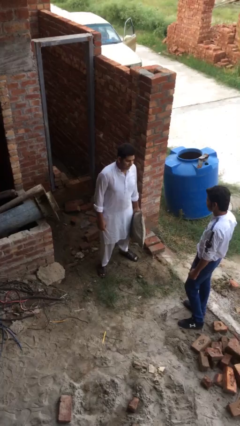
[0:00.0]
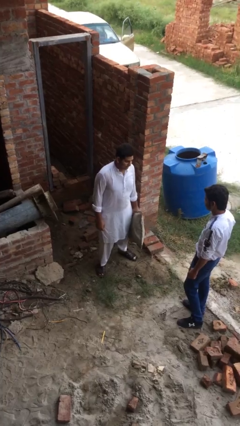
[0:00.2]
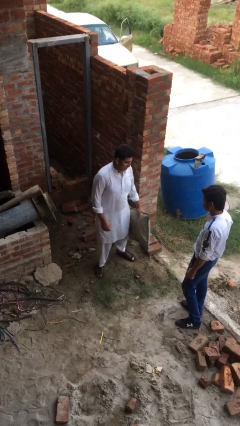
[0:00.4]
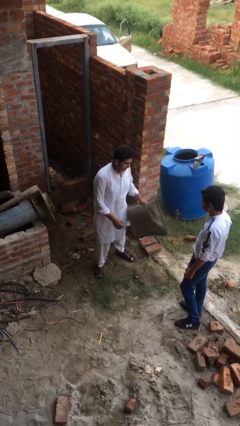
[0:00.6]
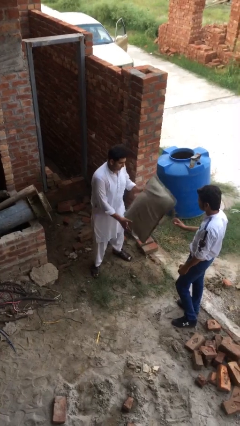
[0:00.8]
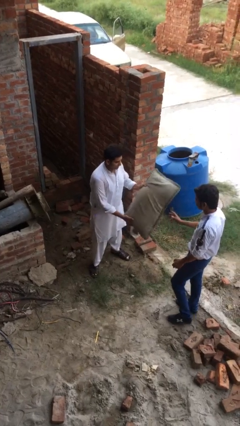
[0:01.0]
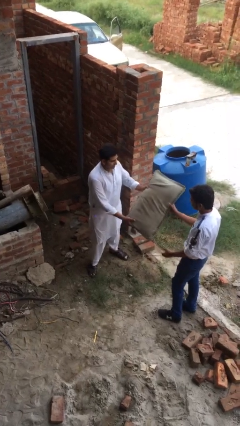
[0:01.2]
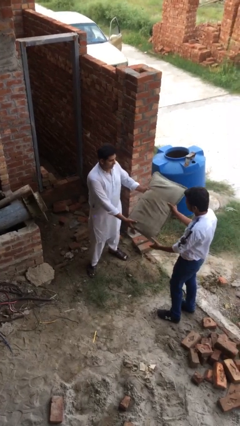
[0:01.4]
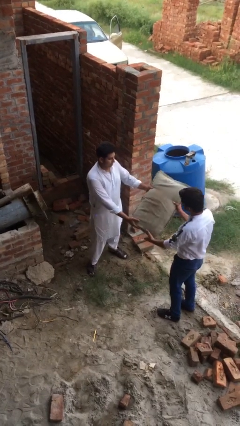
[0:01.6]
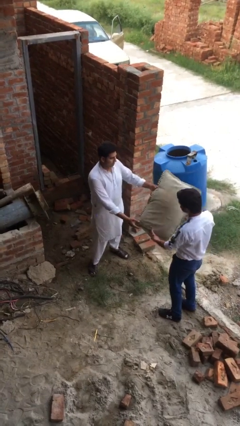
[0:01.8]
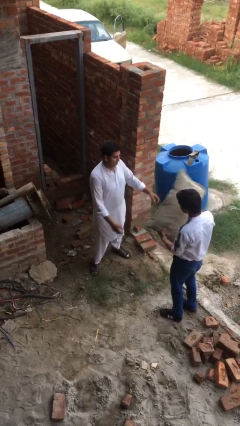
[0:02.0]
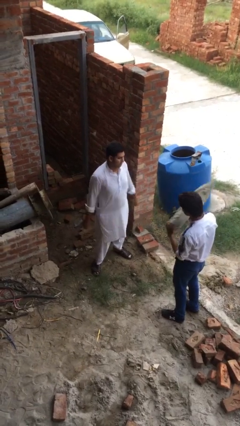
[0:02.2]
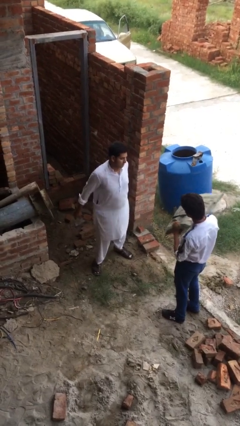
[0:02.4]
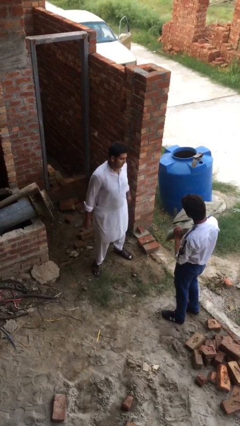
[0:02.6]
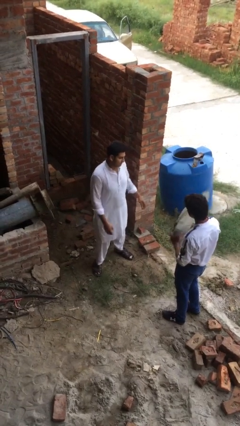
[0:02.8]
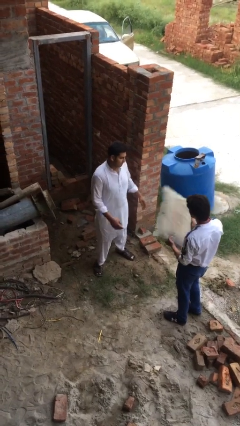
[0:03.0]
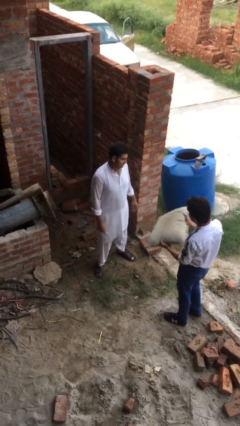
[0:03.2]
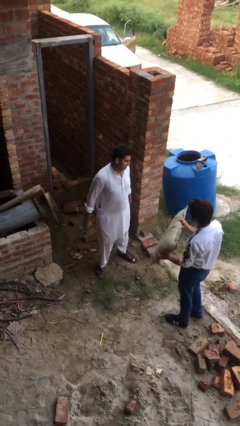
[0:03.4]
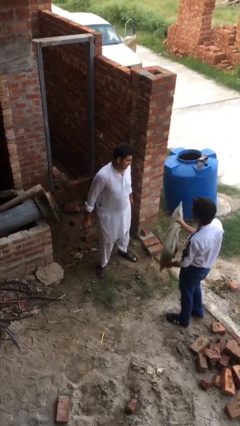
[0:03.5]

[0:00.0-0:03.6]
person transfers object to person

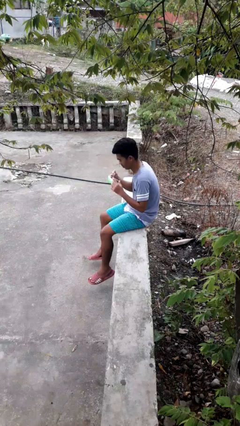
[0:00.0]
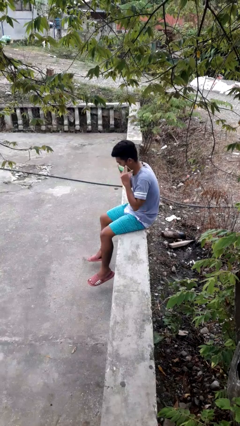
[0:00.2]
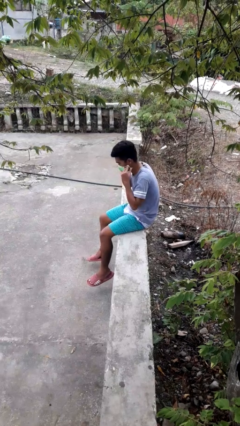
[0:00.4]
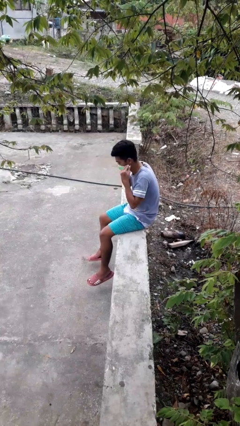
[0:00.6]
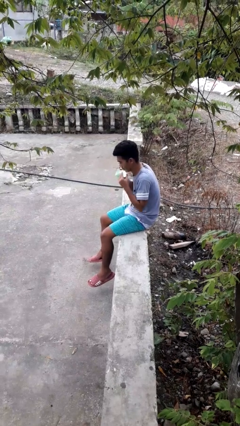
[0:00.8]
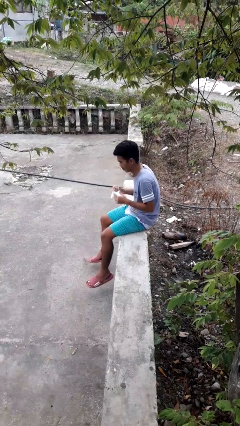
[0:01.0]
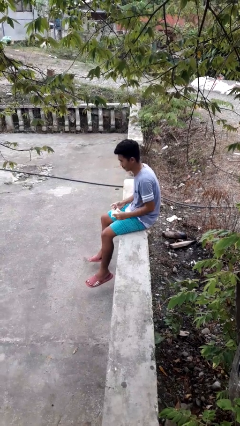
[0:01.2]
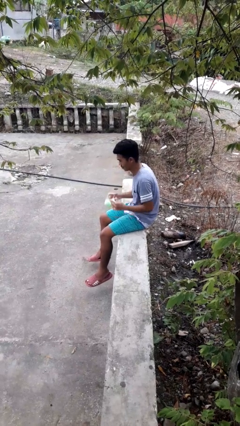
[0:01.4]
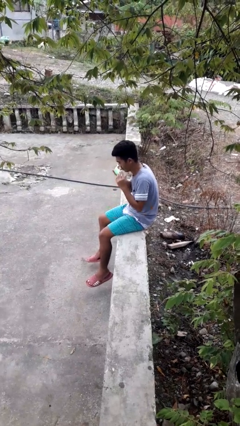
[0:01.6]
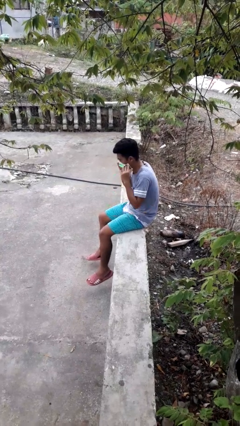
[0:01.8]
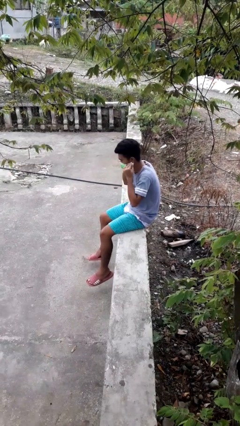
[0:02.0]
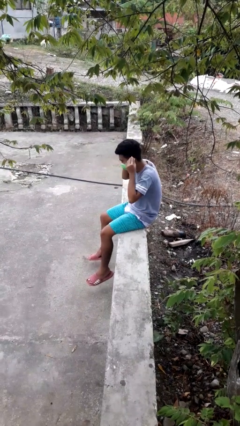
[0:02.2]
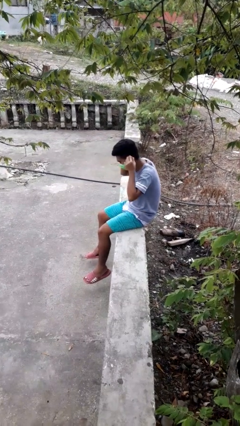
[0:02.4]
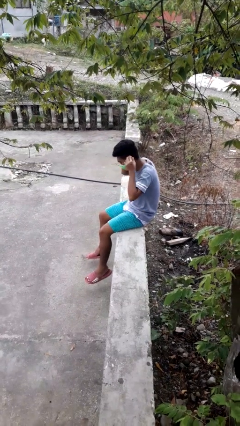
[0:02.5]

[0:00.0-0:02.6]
person puts on facemask

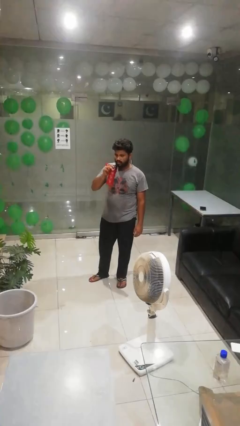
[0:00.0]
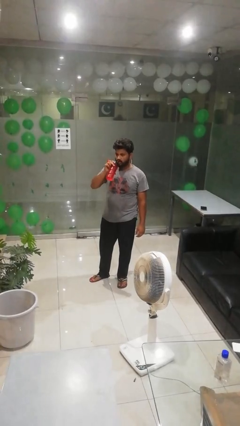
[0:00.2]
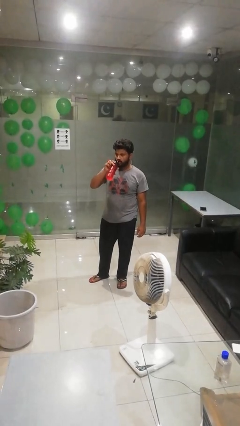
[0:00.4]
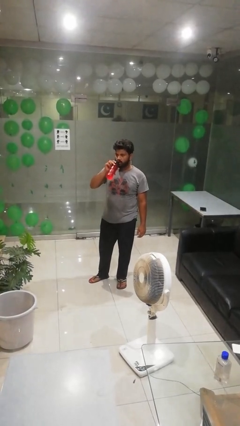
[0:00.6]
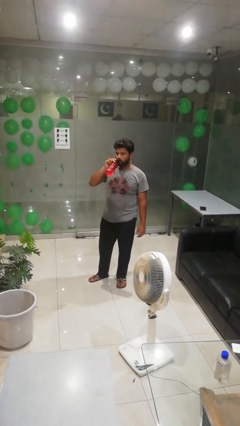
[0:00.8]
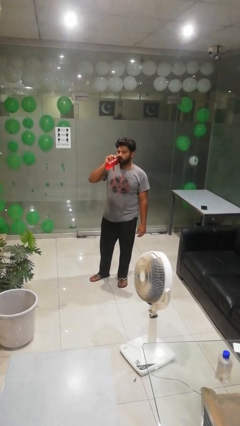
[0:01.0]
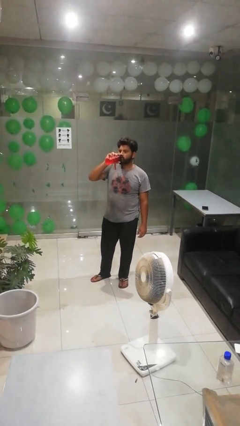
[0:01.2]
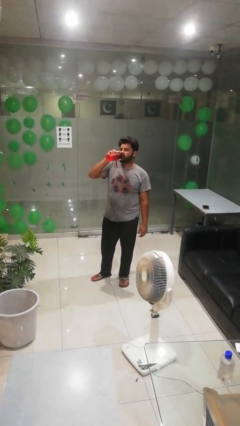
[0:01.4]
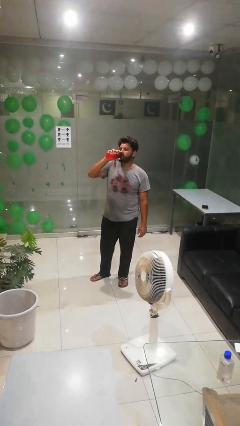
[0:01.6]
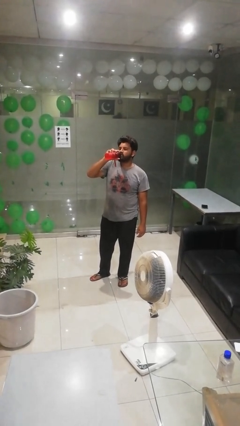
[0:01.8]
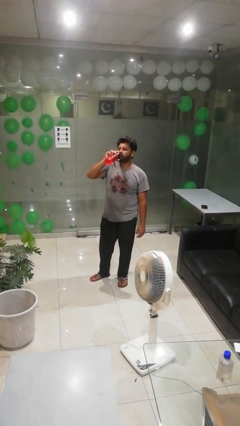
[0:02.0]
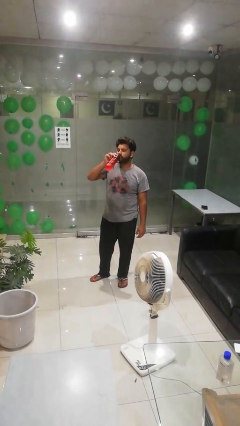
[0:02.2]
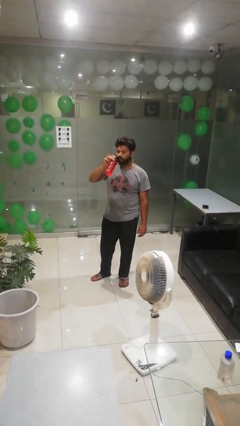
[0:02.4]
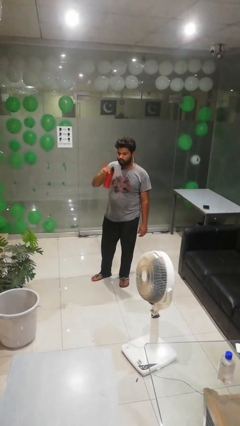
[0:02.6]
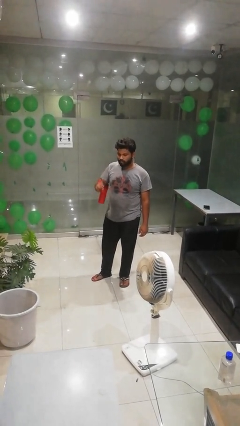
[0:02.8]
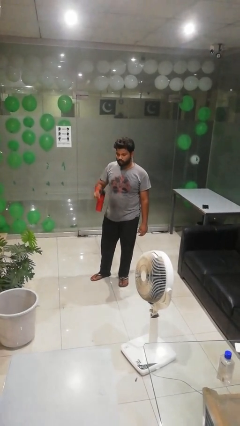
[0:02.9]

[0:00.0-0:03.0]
person drinks from bottle

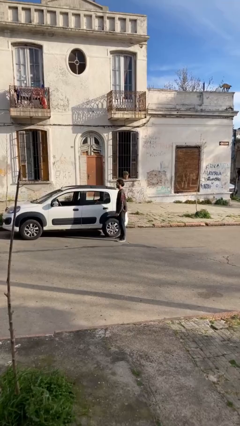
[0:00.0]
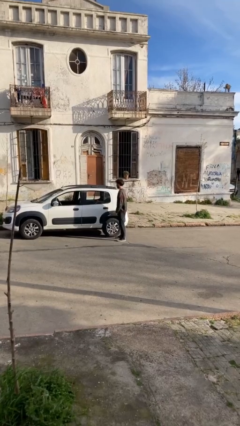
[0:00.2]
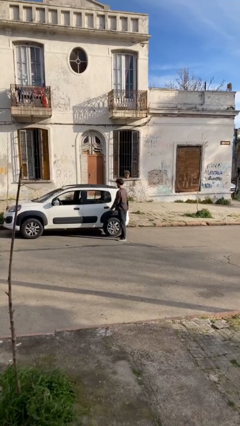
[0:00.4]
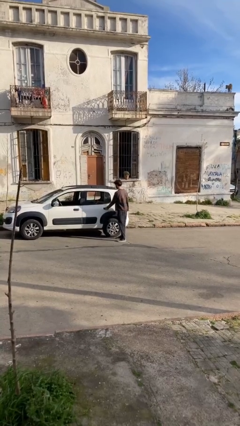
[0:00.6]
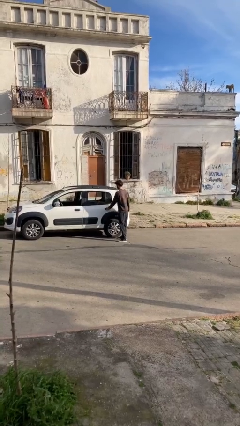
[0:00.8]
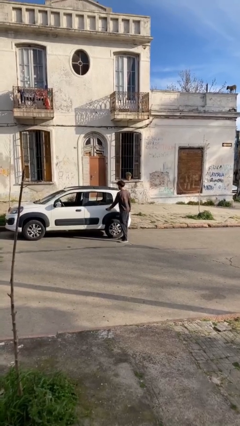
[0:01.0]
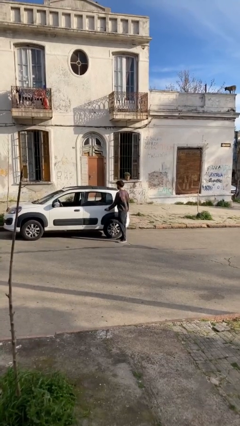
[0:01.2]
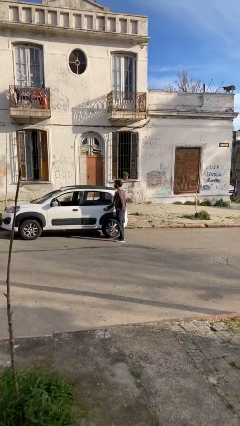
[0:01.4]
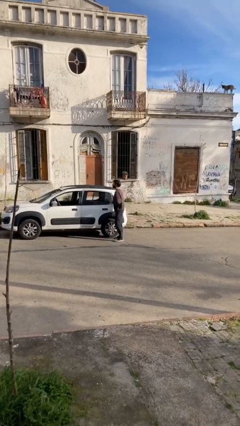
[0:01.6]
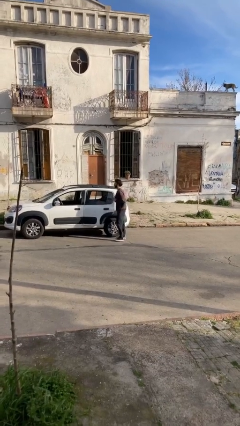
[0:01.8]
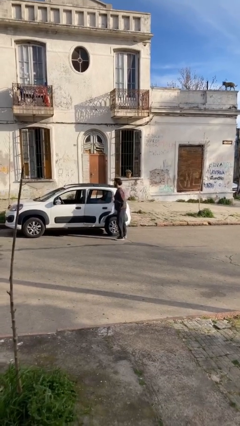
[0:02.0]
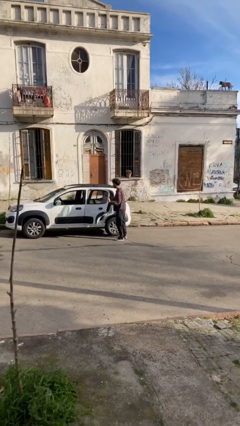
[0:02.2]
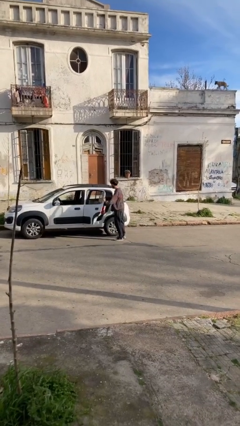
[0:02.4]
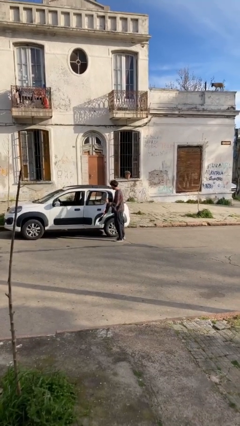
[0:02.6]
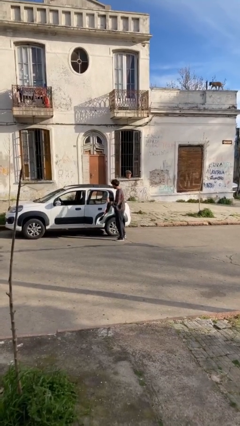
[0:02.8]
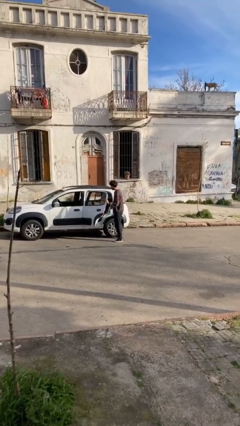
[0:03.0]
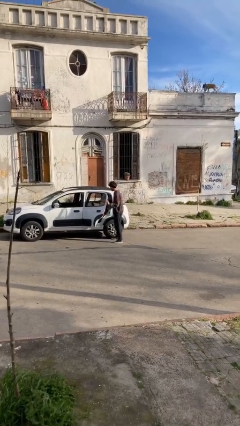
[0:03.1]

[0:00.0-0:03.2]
person opens car door

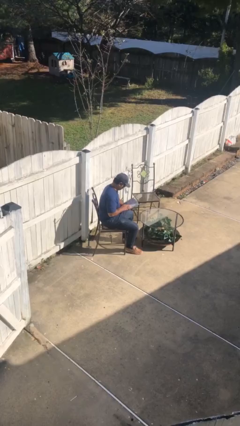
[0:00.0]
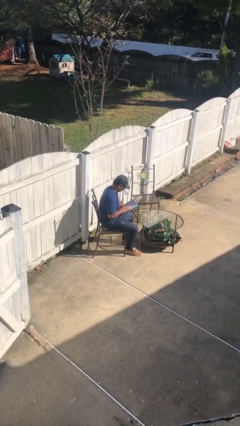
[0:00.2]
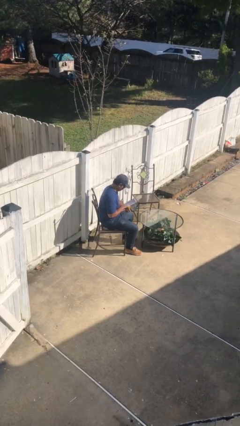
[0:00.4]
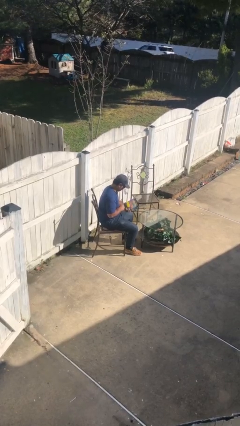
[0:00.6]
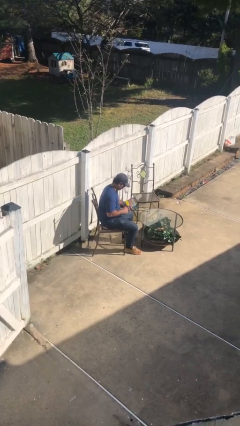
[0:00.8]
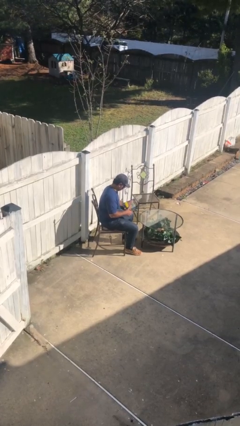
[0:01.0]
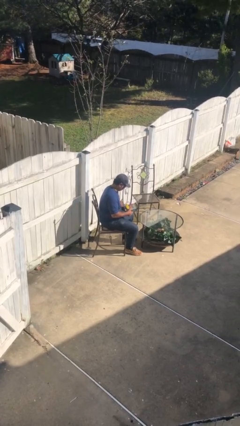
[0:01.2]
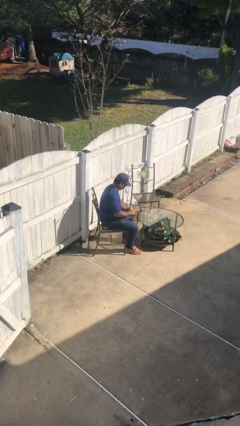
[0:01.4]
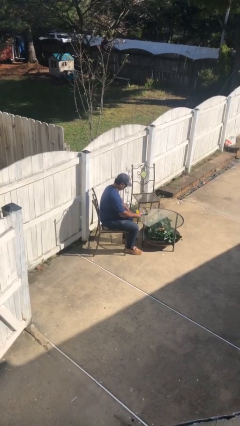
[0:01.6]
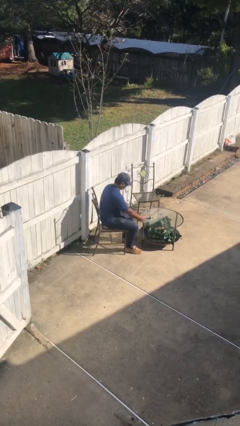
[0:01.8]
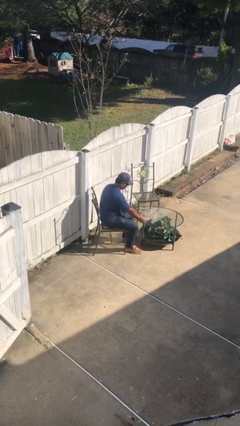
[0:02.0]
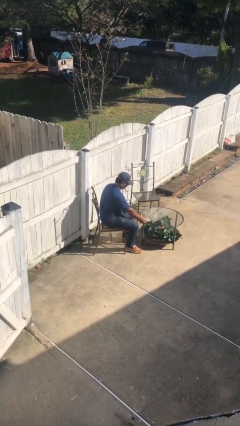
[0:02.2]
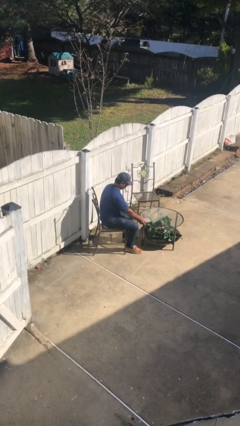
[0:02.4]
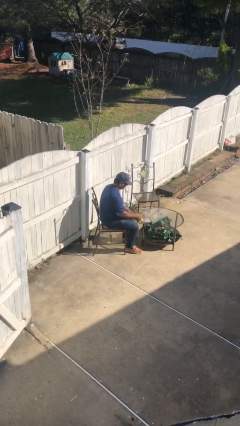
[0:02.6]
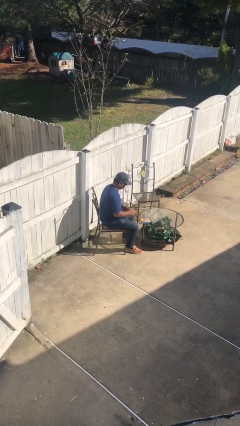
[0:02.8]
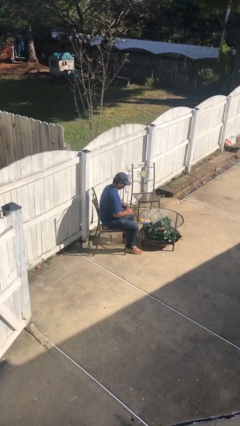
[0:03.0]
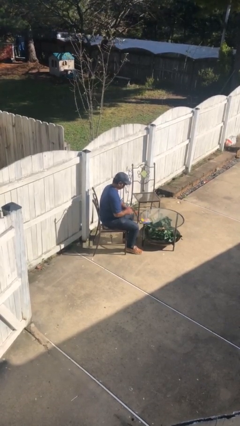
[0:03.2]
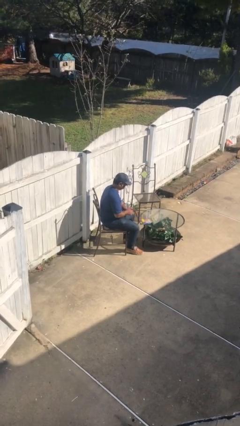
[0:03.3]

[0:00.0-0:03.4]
person puts down object on table

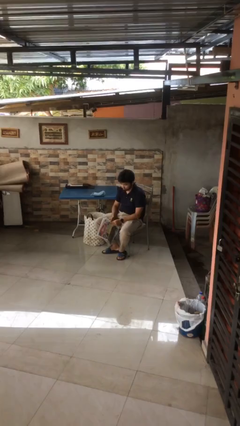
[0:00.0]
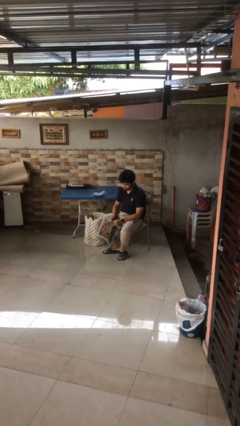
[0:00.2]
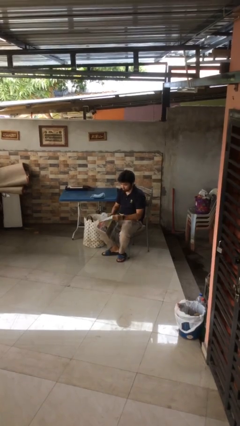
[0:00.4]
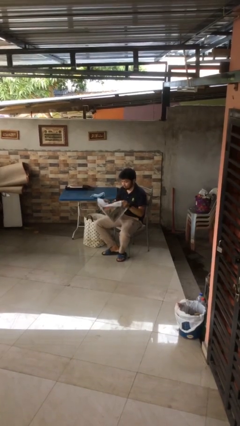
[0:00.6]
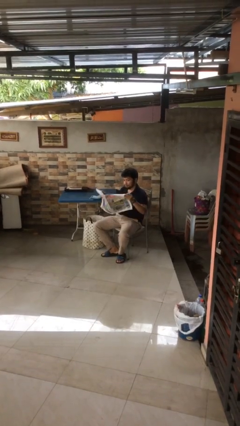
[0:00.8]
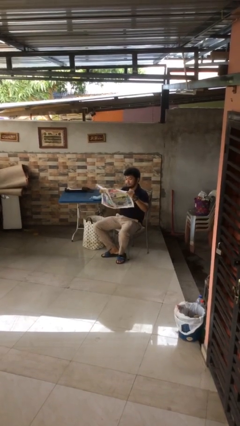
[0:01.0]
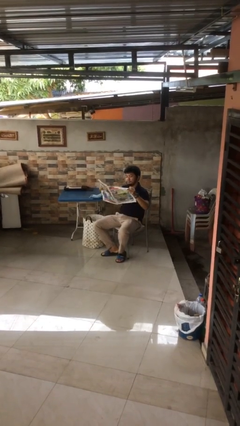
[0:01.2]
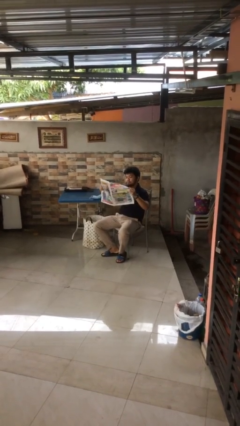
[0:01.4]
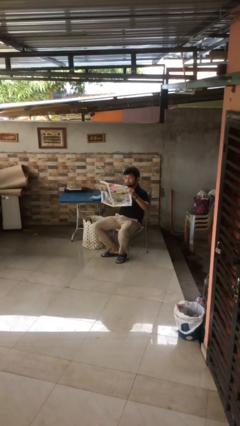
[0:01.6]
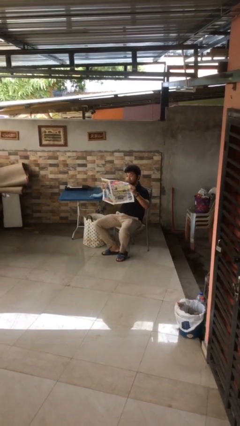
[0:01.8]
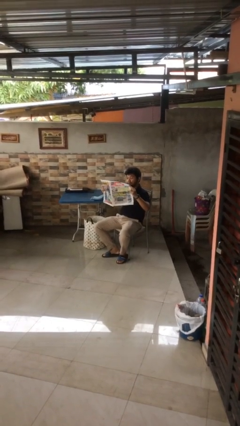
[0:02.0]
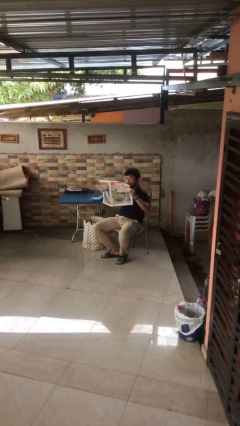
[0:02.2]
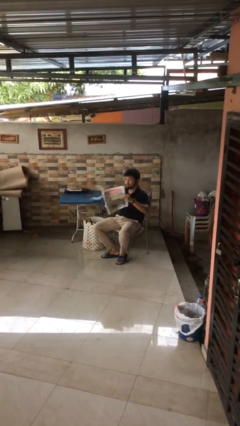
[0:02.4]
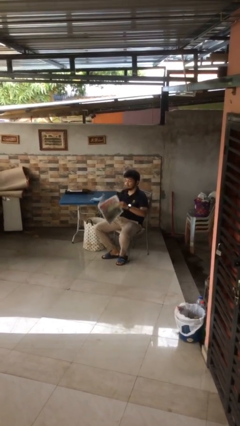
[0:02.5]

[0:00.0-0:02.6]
person reads newspaper
